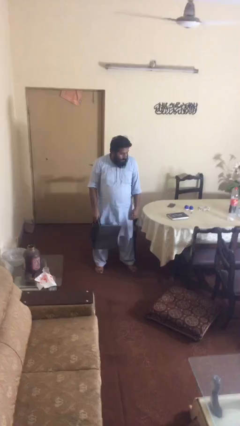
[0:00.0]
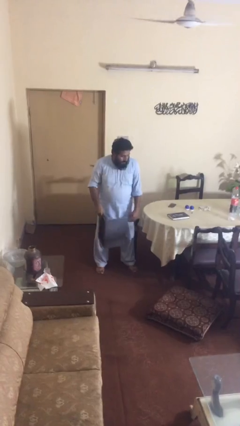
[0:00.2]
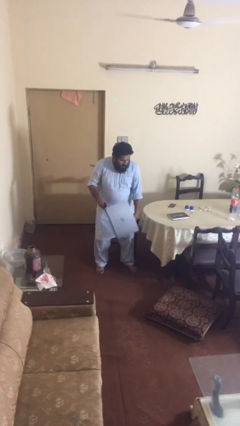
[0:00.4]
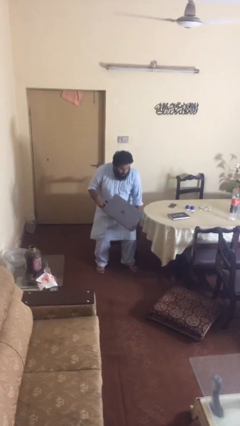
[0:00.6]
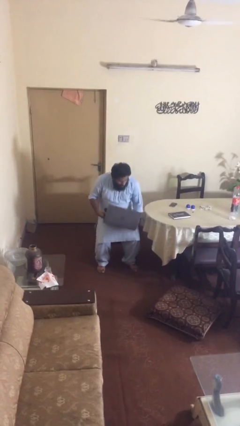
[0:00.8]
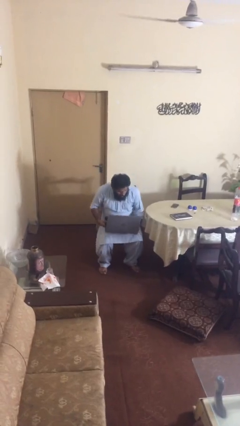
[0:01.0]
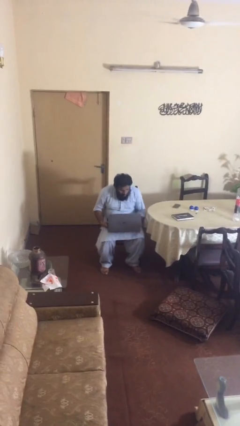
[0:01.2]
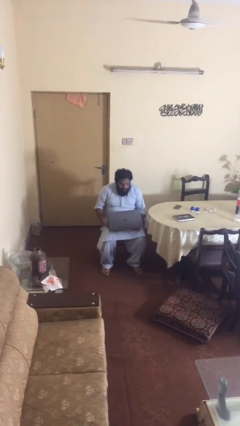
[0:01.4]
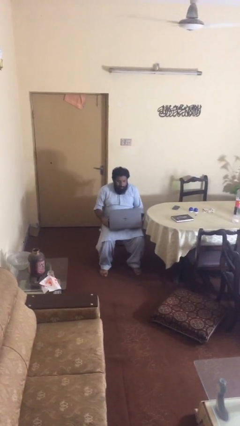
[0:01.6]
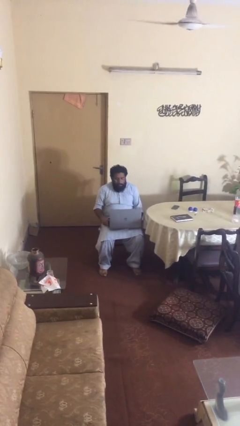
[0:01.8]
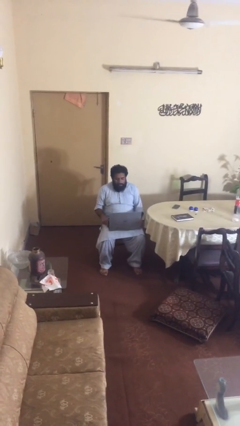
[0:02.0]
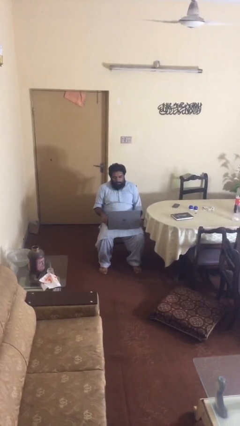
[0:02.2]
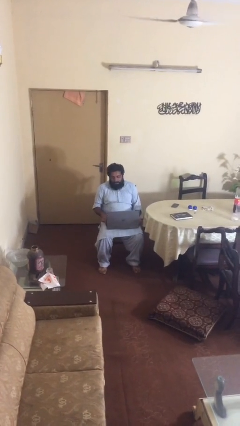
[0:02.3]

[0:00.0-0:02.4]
person sits down

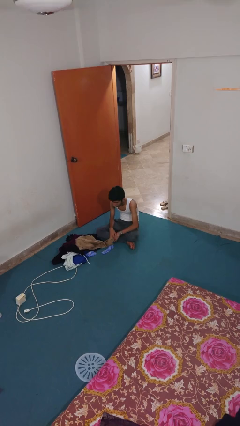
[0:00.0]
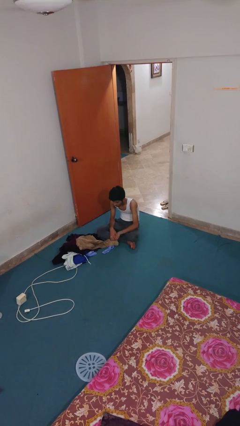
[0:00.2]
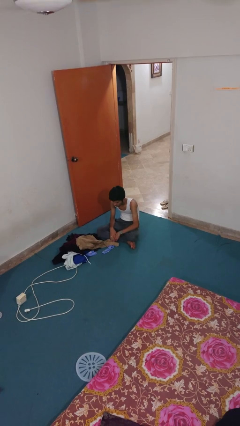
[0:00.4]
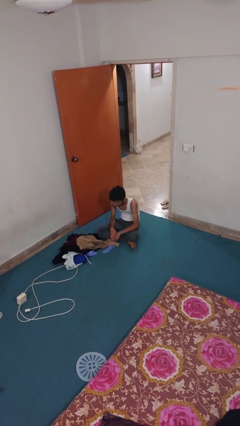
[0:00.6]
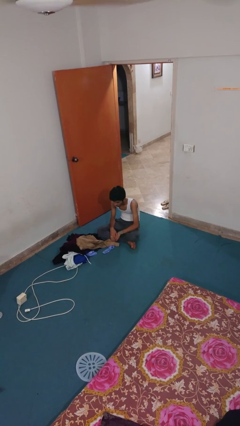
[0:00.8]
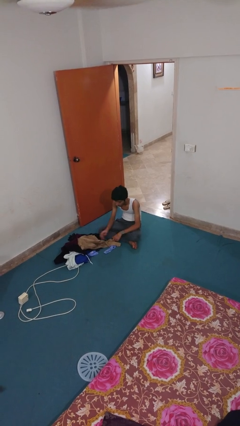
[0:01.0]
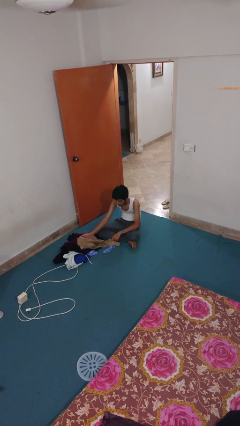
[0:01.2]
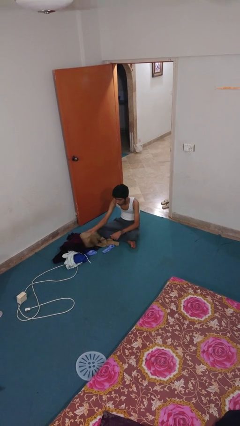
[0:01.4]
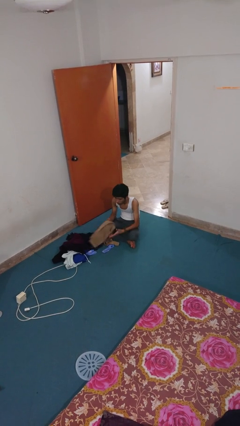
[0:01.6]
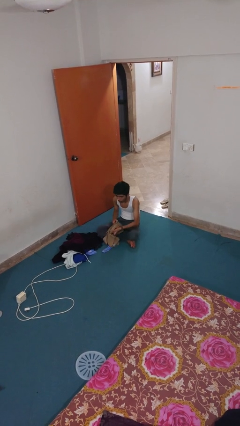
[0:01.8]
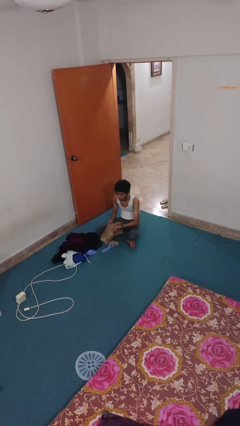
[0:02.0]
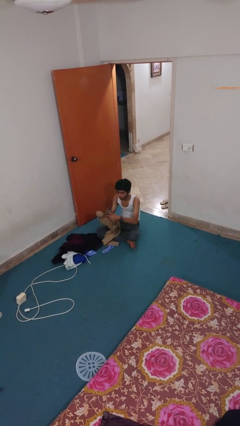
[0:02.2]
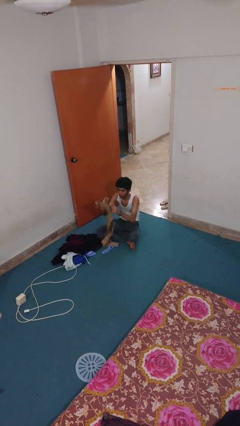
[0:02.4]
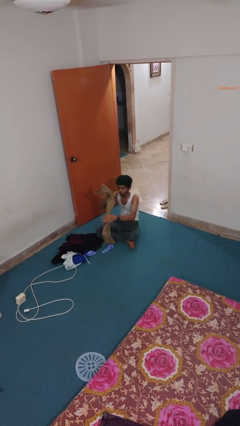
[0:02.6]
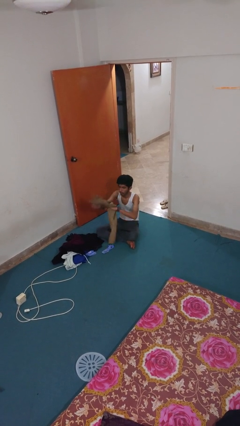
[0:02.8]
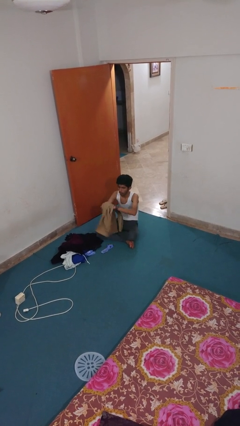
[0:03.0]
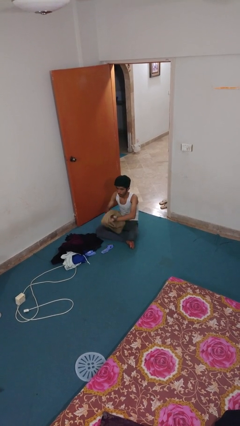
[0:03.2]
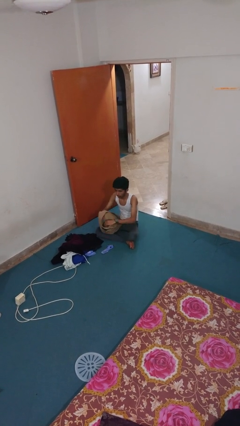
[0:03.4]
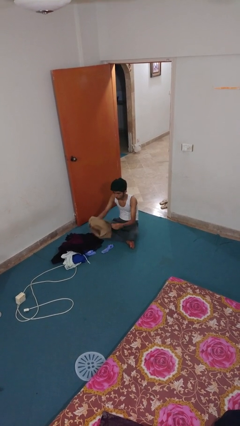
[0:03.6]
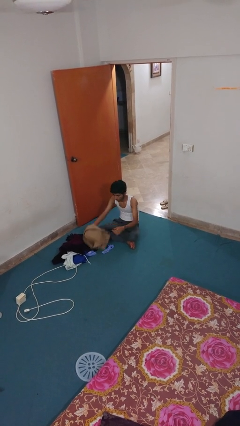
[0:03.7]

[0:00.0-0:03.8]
person folds pants

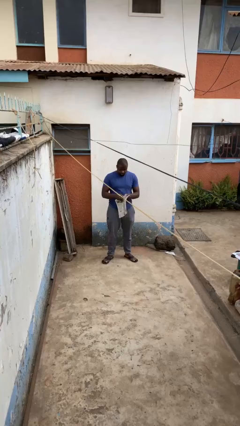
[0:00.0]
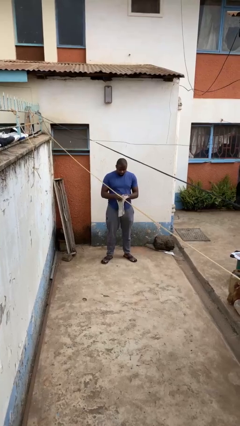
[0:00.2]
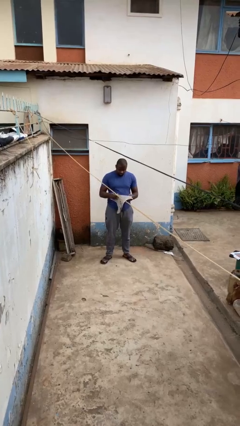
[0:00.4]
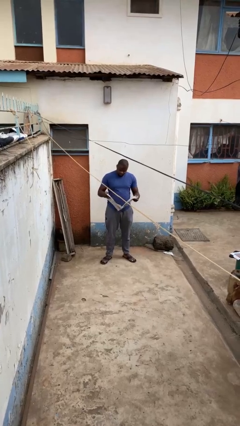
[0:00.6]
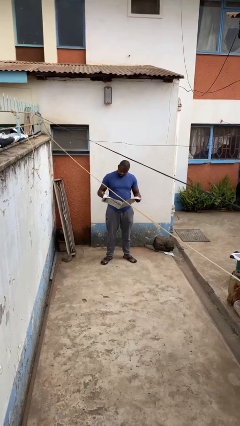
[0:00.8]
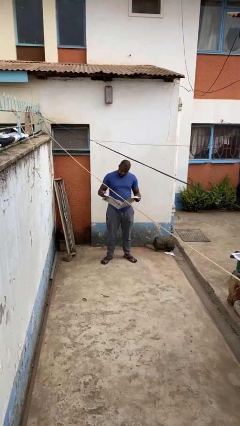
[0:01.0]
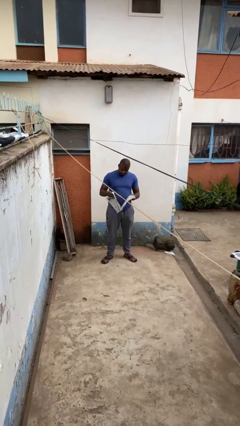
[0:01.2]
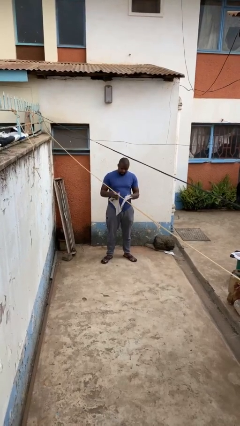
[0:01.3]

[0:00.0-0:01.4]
person reads newspaper

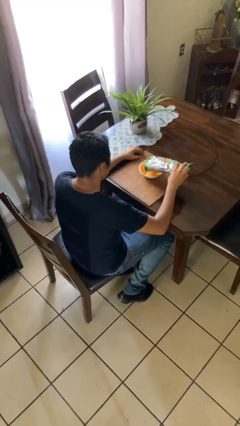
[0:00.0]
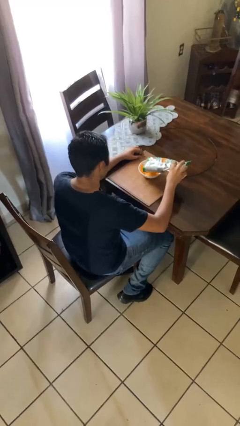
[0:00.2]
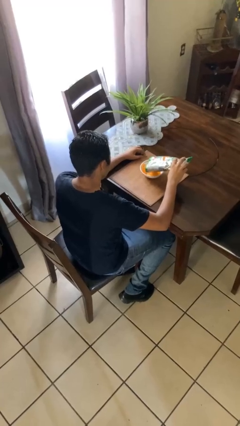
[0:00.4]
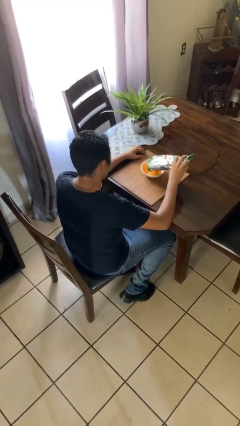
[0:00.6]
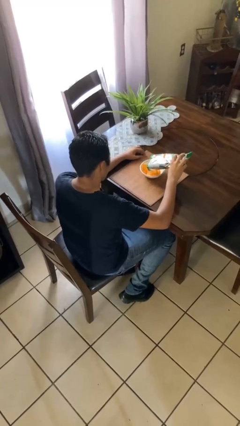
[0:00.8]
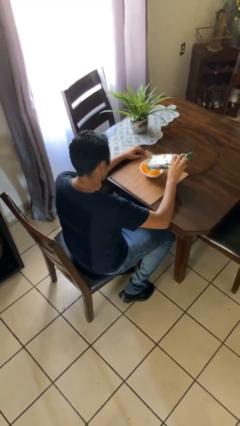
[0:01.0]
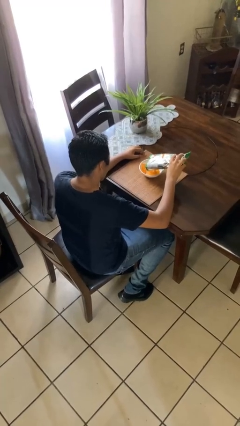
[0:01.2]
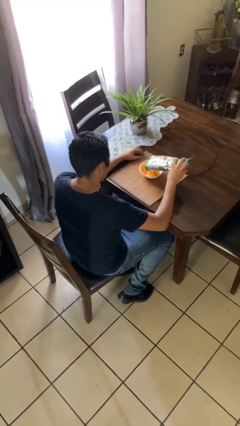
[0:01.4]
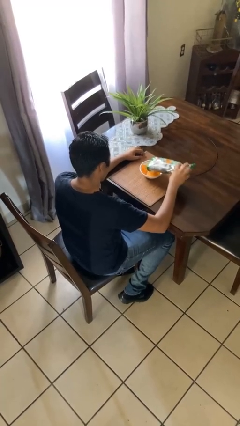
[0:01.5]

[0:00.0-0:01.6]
person pours into bowl

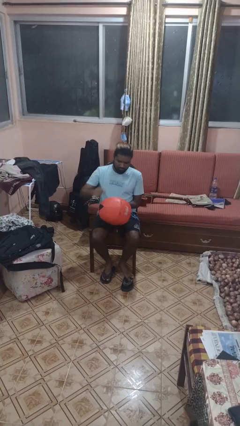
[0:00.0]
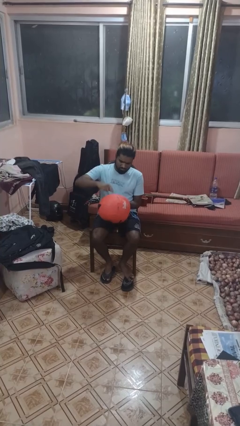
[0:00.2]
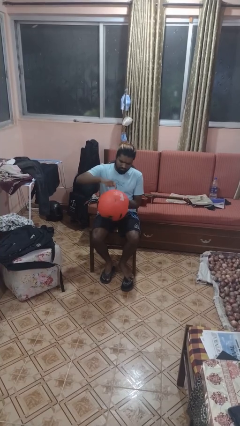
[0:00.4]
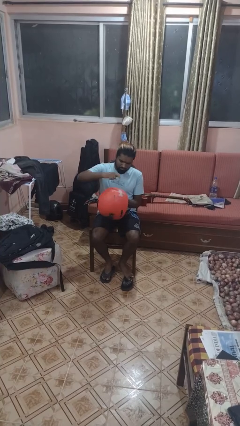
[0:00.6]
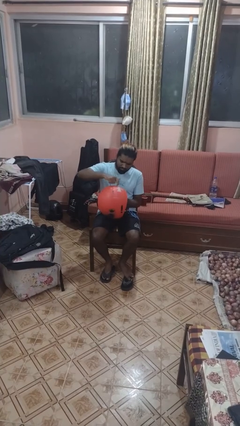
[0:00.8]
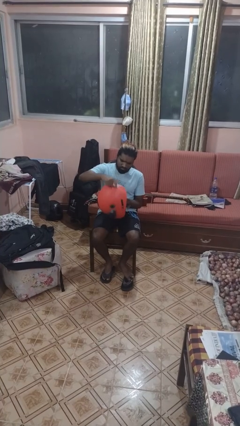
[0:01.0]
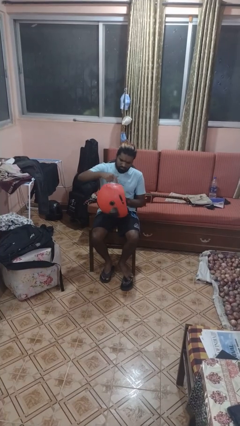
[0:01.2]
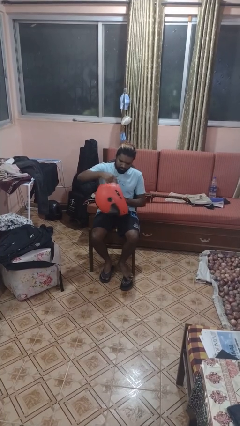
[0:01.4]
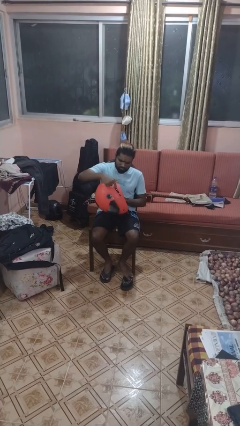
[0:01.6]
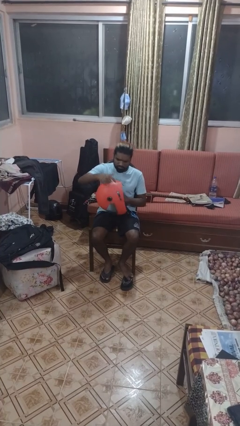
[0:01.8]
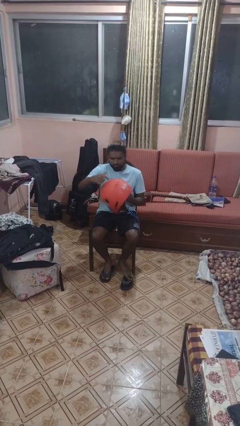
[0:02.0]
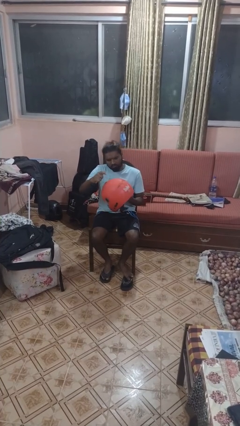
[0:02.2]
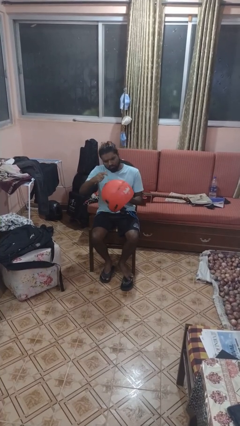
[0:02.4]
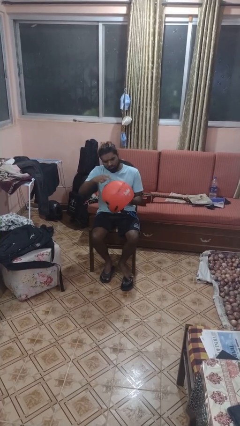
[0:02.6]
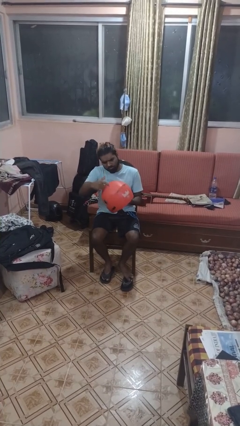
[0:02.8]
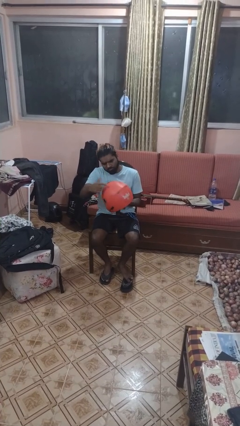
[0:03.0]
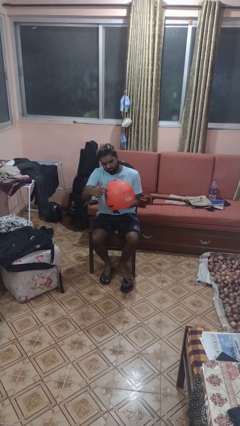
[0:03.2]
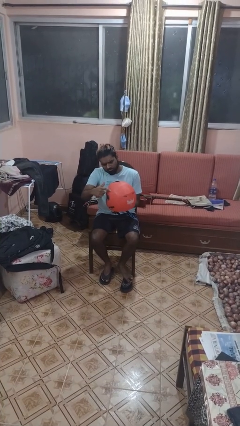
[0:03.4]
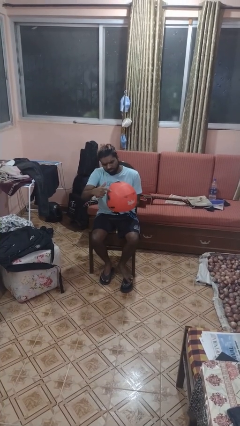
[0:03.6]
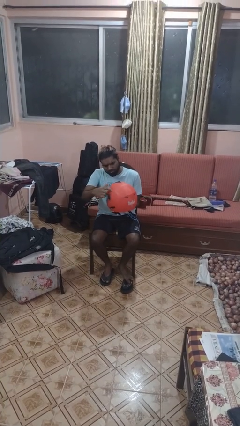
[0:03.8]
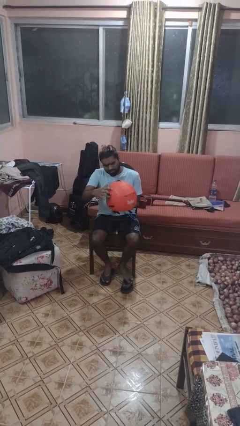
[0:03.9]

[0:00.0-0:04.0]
person taps object with finger

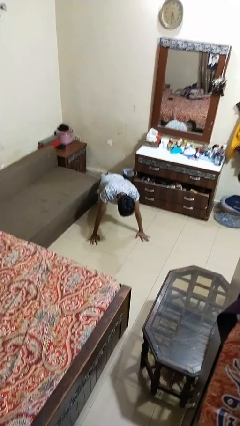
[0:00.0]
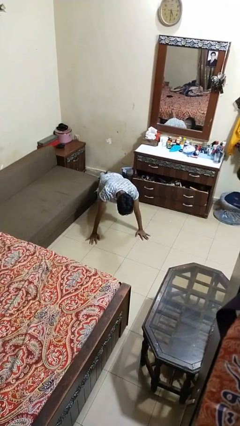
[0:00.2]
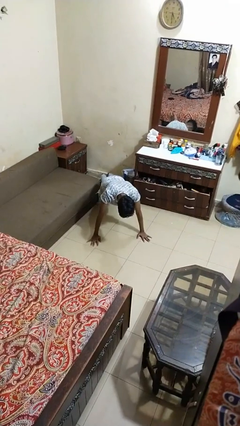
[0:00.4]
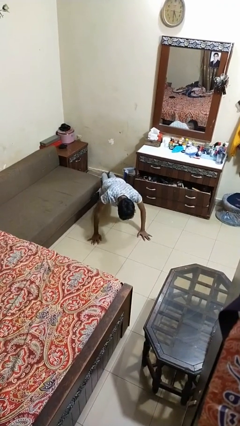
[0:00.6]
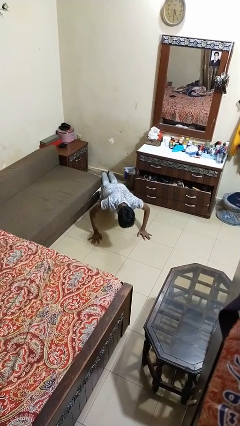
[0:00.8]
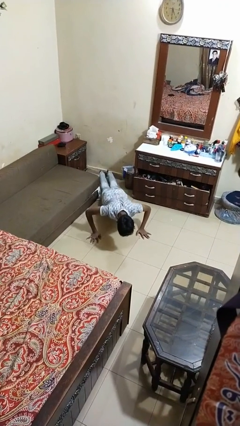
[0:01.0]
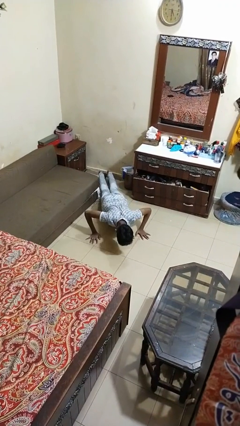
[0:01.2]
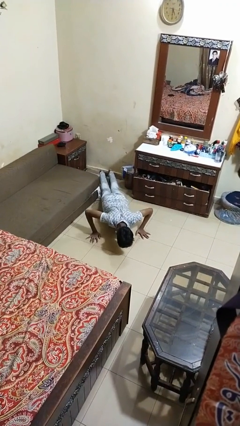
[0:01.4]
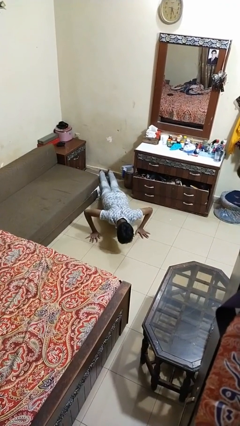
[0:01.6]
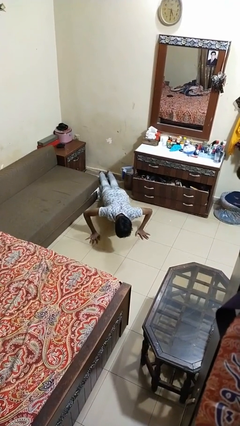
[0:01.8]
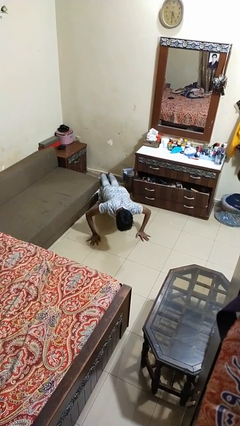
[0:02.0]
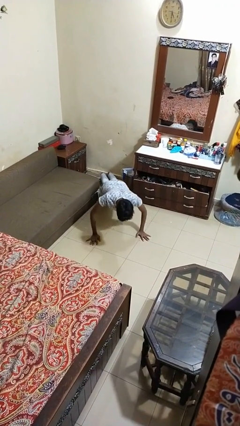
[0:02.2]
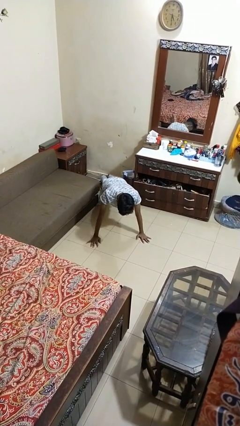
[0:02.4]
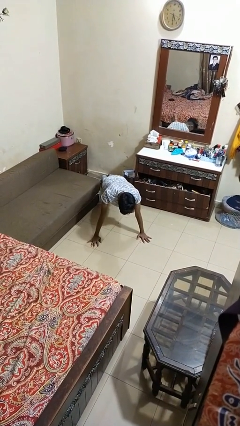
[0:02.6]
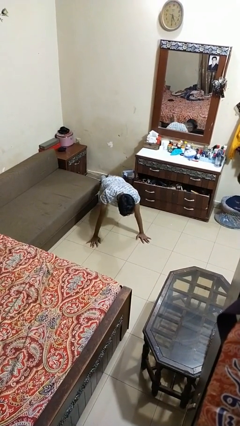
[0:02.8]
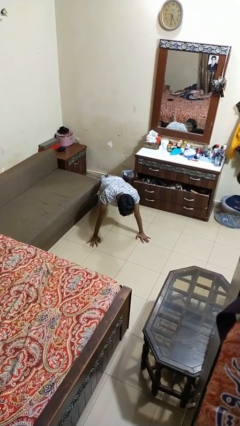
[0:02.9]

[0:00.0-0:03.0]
person exercises with pushup

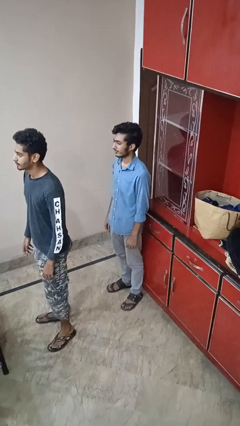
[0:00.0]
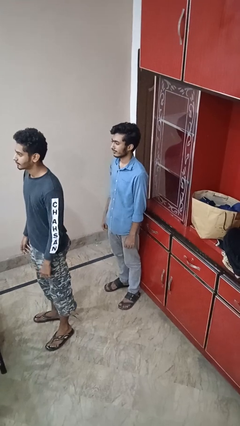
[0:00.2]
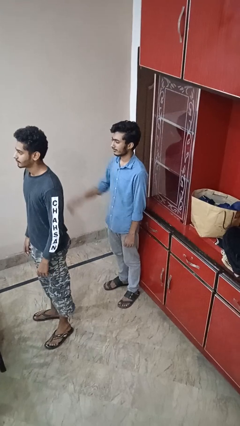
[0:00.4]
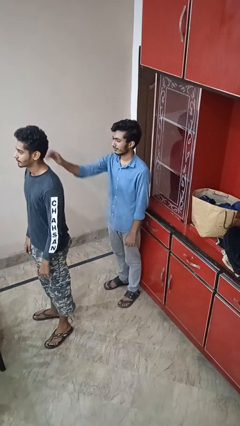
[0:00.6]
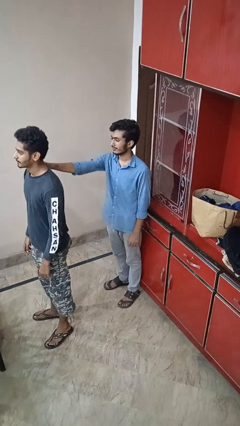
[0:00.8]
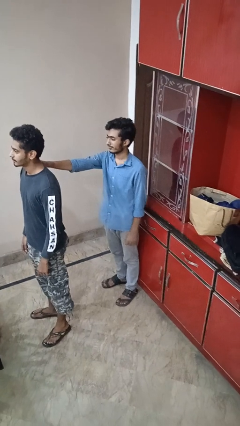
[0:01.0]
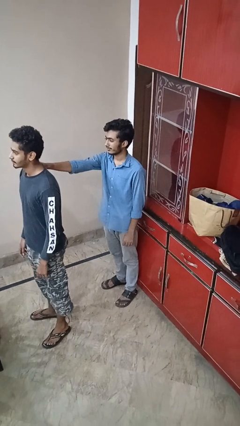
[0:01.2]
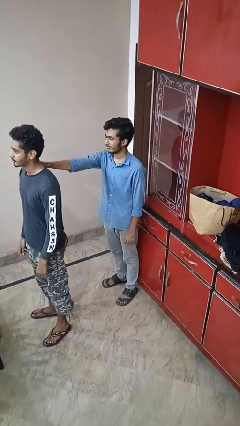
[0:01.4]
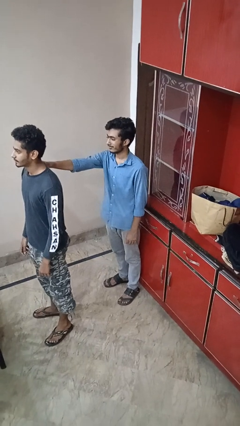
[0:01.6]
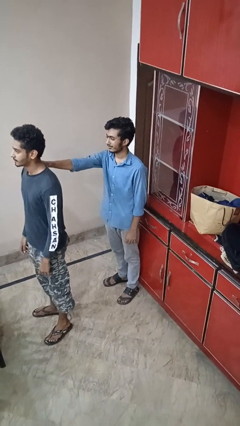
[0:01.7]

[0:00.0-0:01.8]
person grabs person by shoulder
